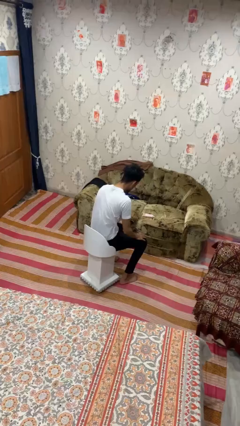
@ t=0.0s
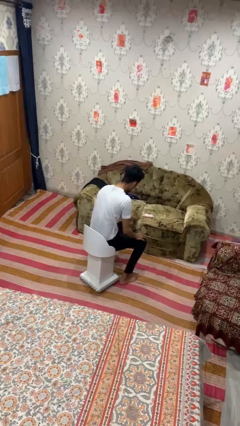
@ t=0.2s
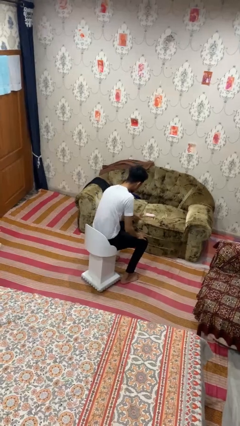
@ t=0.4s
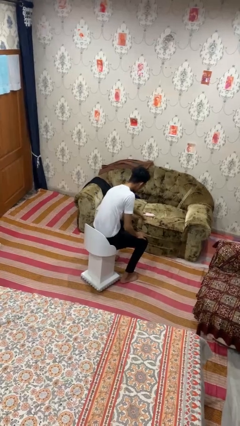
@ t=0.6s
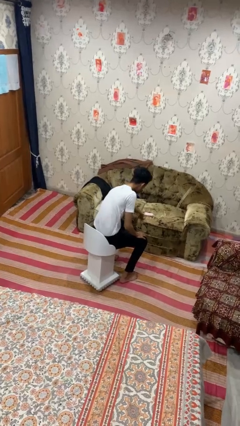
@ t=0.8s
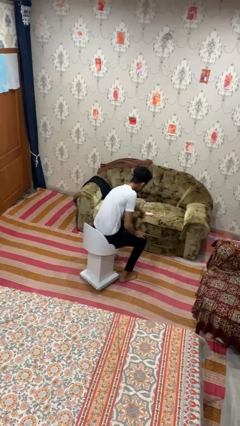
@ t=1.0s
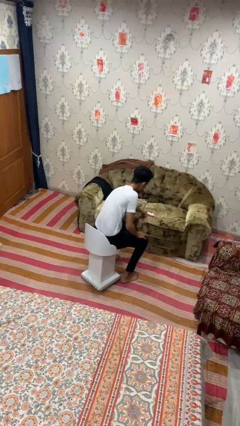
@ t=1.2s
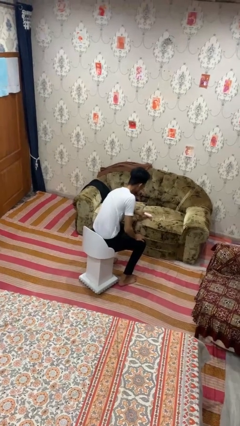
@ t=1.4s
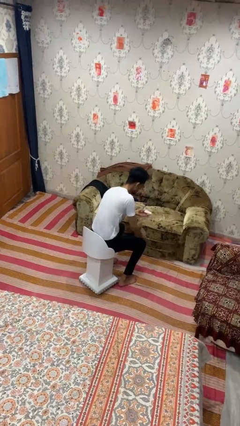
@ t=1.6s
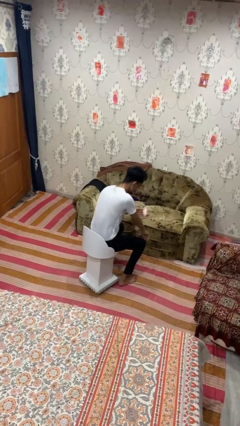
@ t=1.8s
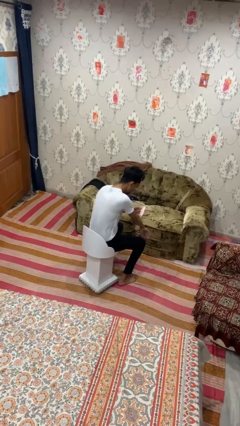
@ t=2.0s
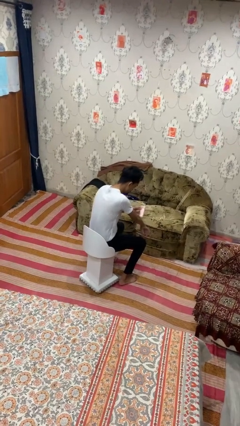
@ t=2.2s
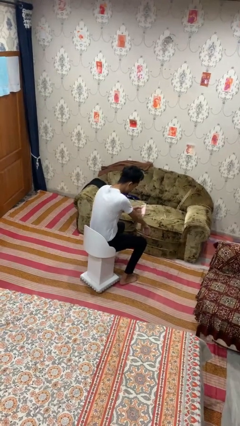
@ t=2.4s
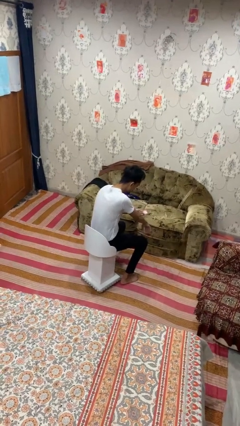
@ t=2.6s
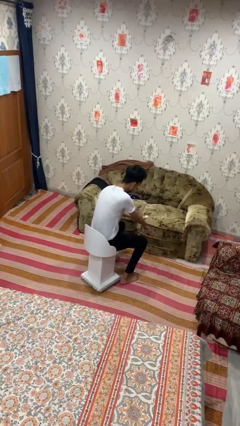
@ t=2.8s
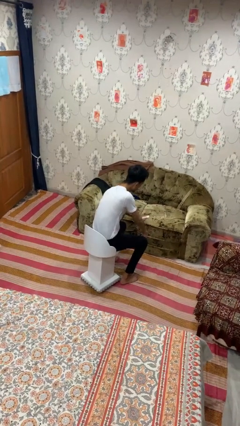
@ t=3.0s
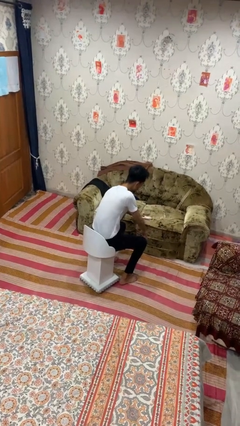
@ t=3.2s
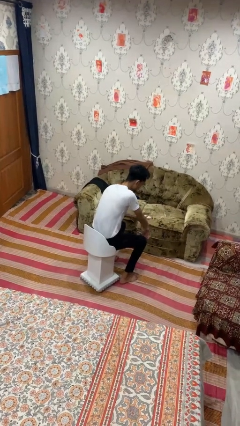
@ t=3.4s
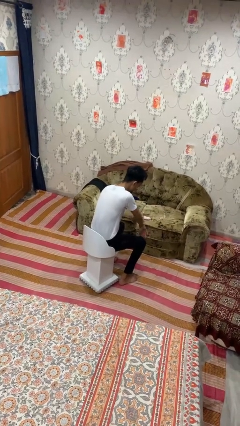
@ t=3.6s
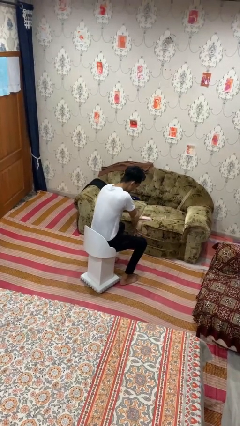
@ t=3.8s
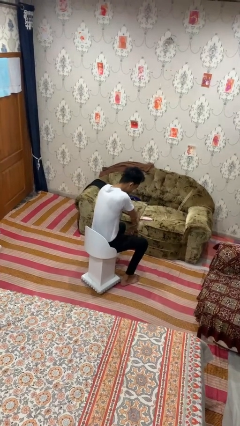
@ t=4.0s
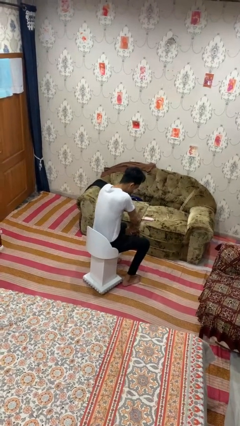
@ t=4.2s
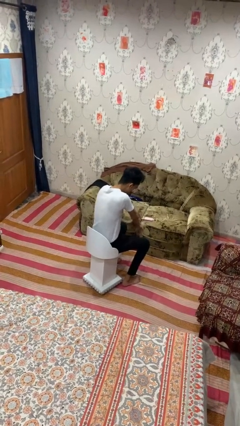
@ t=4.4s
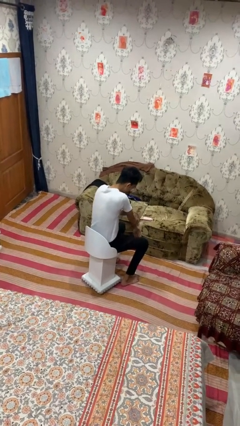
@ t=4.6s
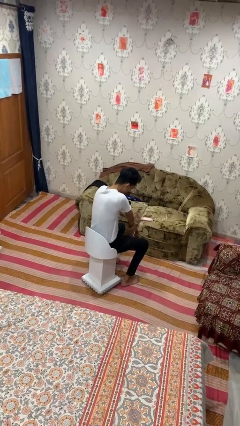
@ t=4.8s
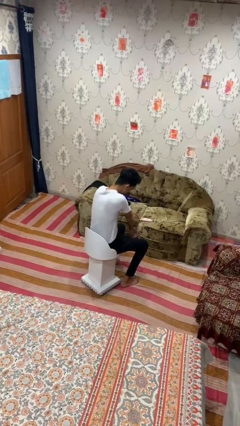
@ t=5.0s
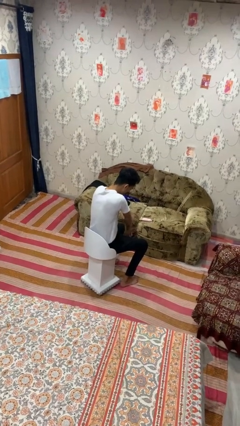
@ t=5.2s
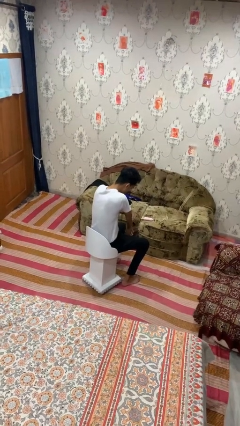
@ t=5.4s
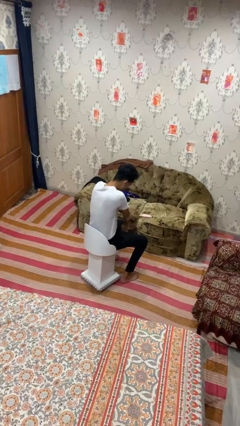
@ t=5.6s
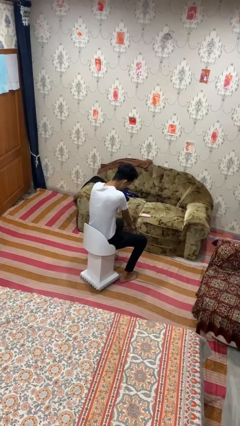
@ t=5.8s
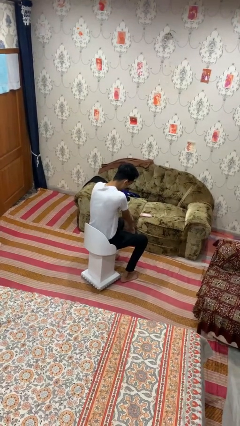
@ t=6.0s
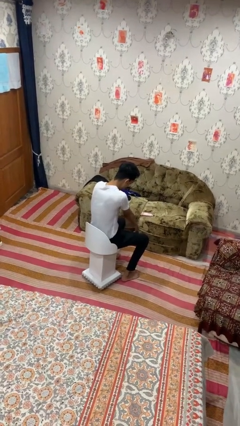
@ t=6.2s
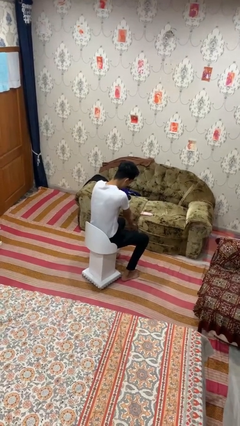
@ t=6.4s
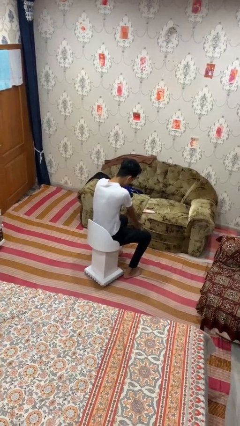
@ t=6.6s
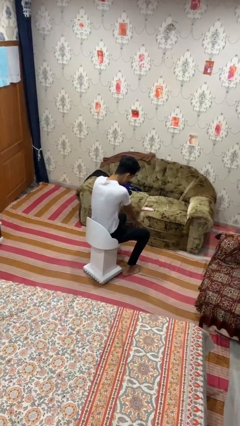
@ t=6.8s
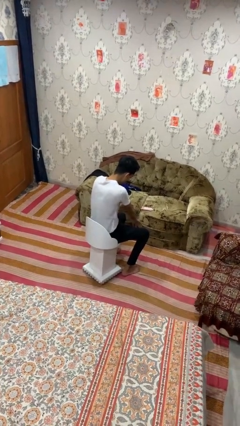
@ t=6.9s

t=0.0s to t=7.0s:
person applies sunscreen

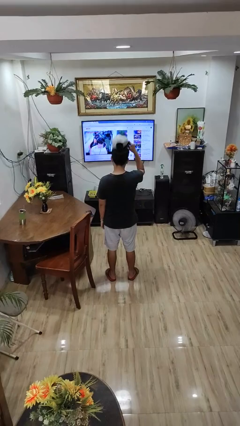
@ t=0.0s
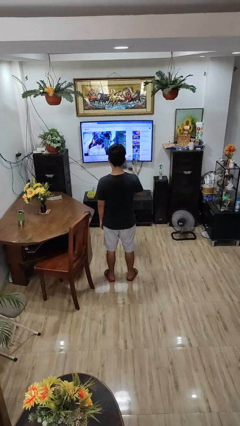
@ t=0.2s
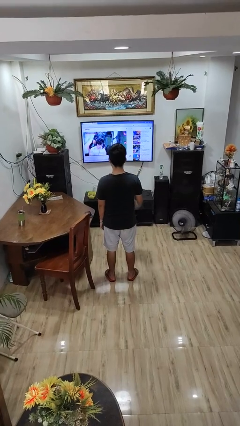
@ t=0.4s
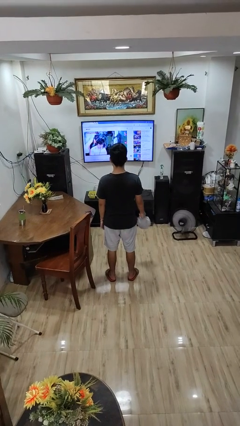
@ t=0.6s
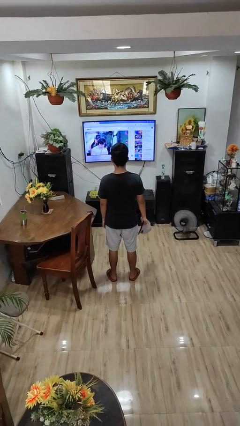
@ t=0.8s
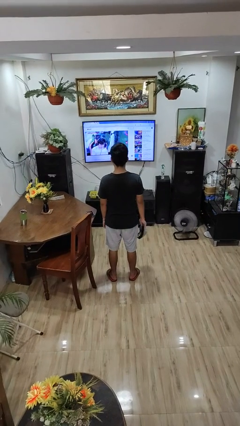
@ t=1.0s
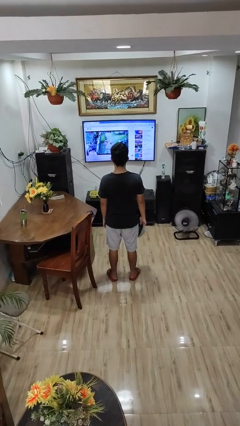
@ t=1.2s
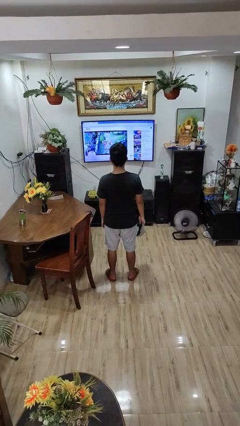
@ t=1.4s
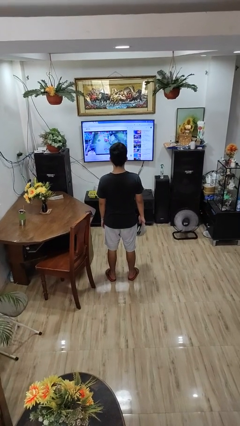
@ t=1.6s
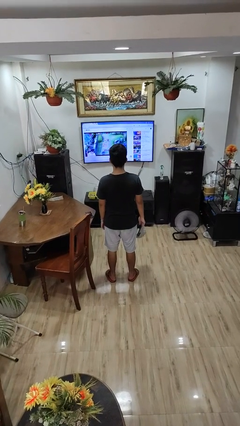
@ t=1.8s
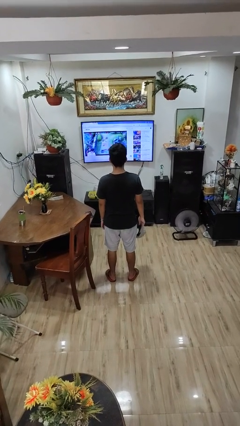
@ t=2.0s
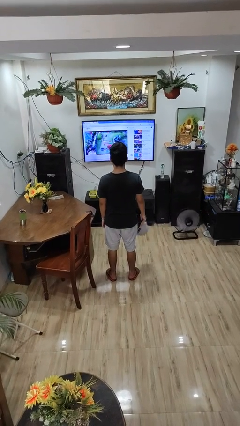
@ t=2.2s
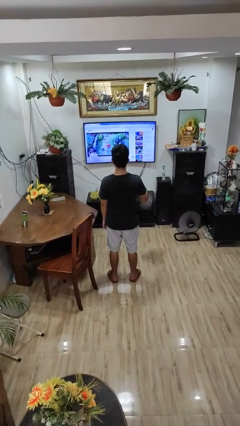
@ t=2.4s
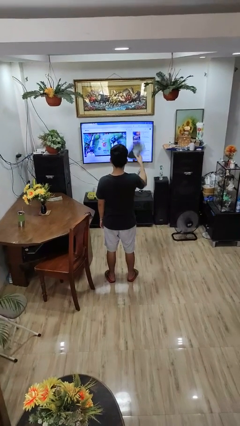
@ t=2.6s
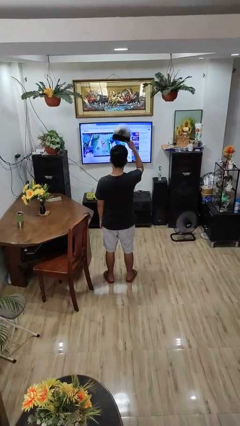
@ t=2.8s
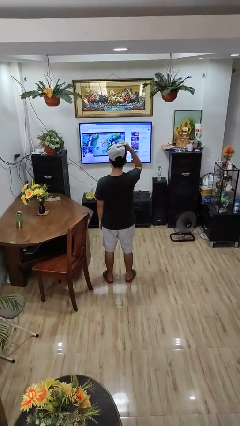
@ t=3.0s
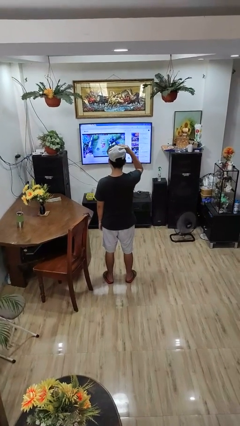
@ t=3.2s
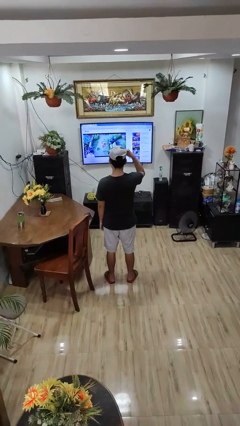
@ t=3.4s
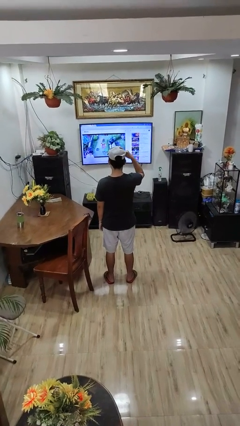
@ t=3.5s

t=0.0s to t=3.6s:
person sweeps floor

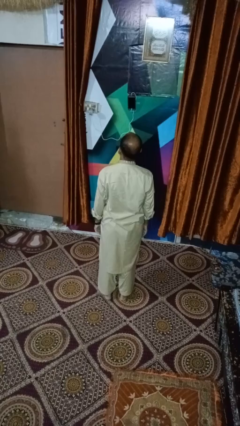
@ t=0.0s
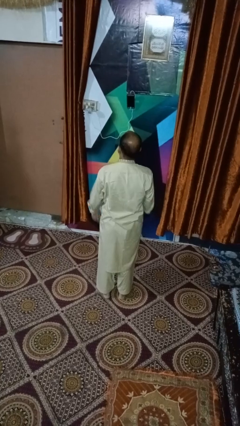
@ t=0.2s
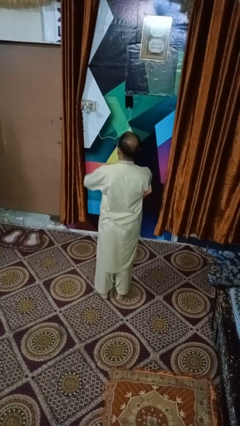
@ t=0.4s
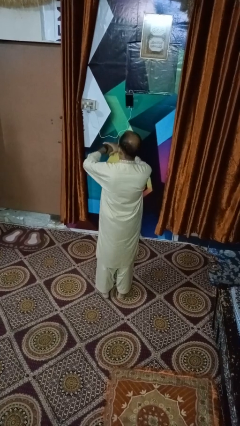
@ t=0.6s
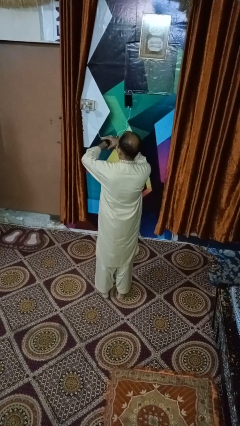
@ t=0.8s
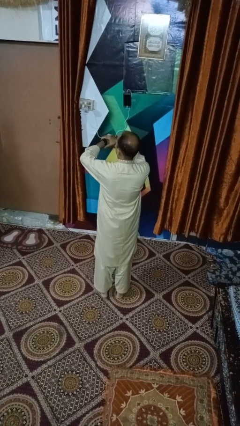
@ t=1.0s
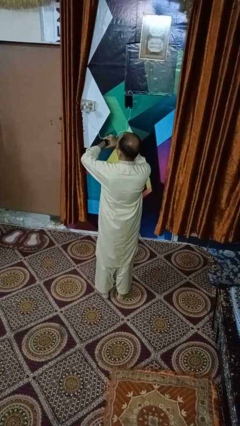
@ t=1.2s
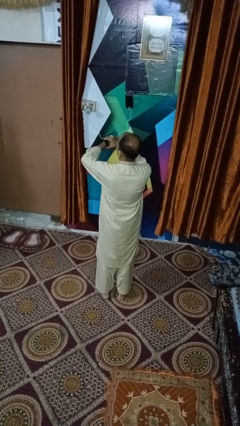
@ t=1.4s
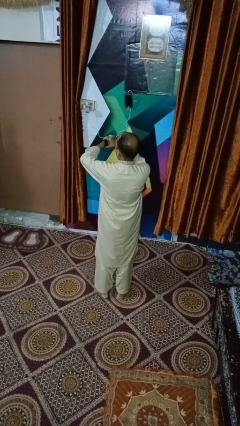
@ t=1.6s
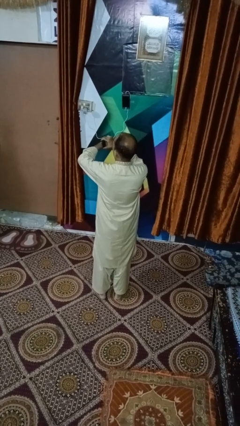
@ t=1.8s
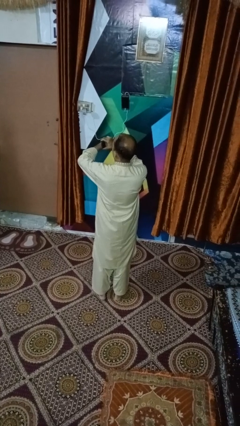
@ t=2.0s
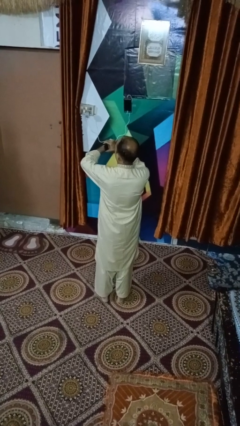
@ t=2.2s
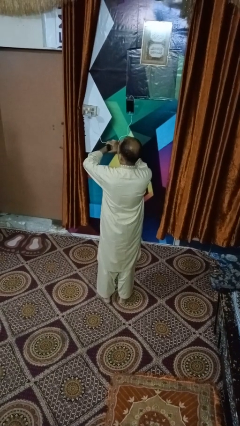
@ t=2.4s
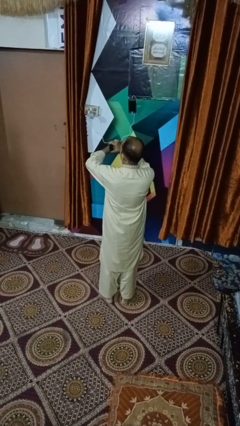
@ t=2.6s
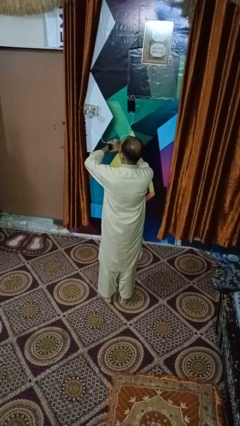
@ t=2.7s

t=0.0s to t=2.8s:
person looks at wristwatch

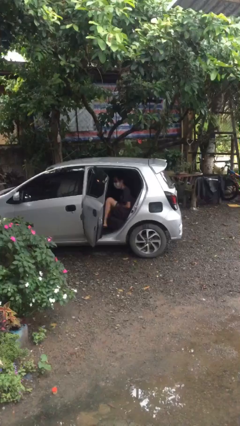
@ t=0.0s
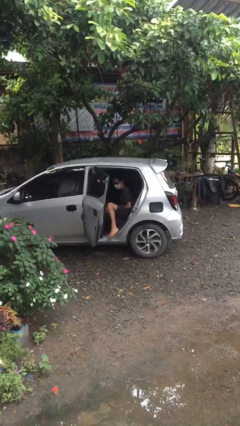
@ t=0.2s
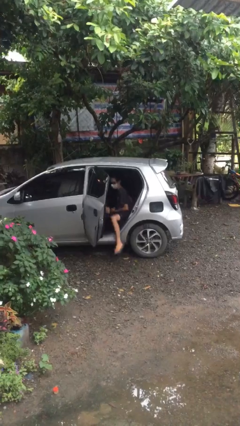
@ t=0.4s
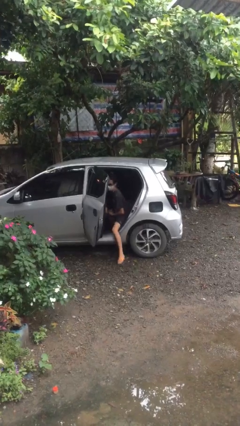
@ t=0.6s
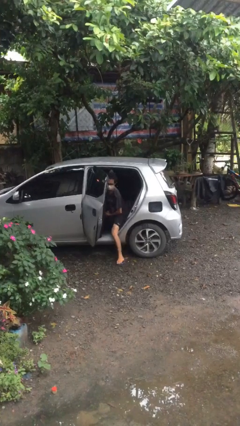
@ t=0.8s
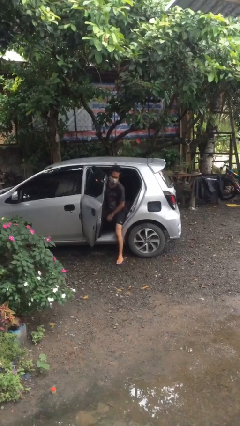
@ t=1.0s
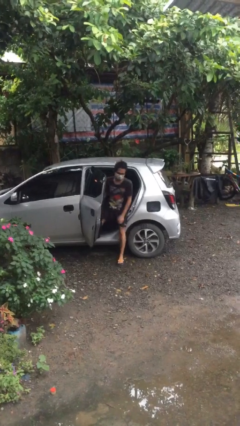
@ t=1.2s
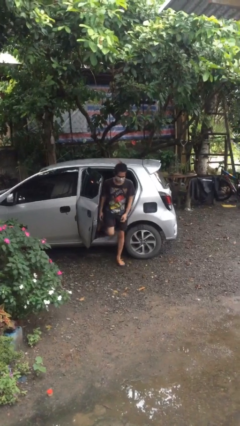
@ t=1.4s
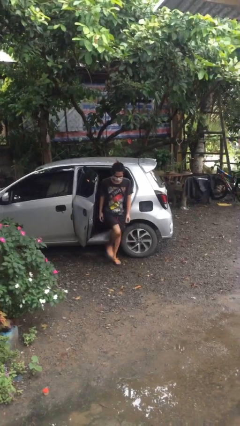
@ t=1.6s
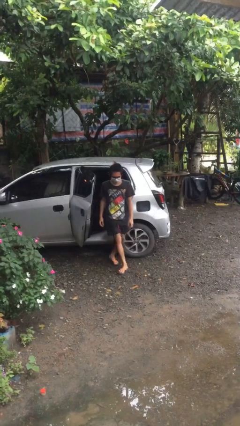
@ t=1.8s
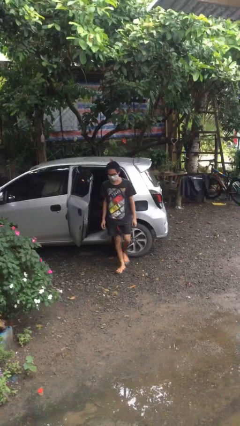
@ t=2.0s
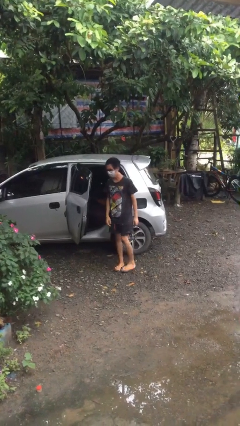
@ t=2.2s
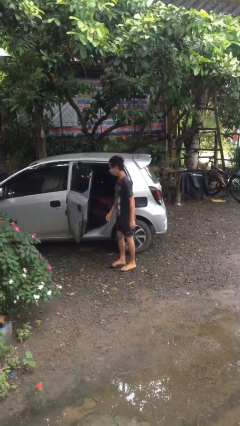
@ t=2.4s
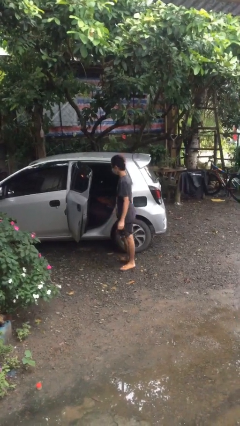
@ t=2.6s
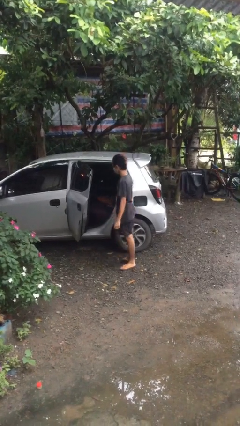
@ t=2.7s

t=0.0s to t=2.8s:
person exits car

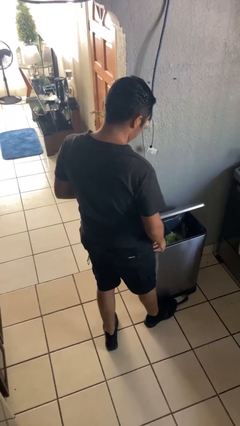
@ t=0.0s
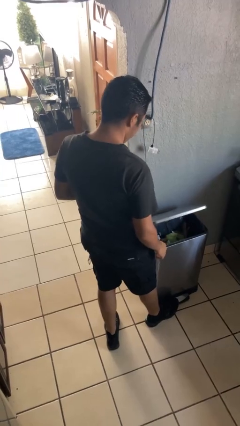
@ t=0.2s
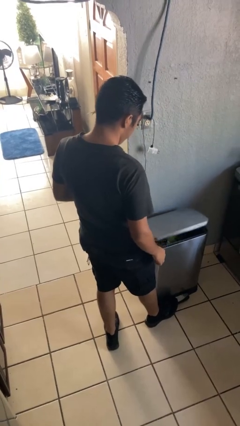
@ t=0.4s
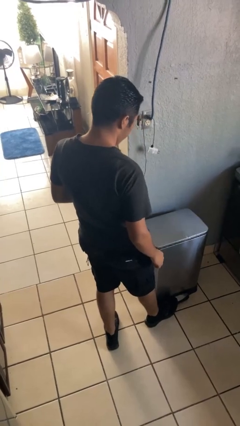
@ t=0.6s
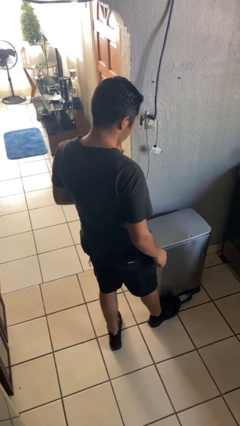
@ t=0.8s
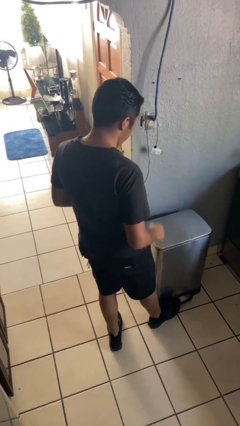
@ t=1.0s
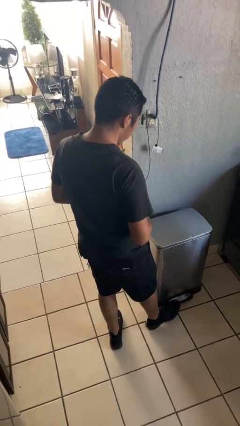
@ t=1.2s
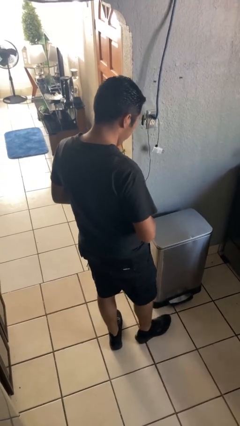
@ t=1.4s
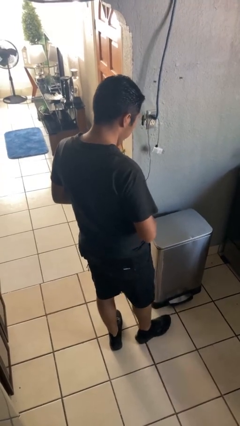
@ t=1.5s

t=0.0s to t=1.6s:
person discards trash
